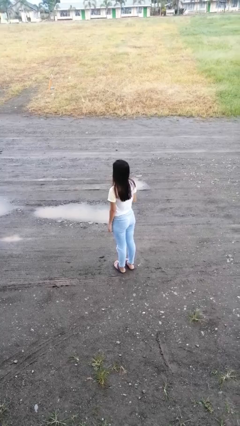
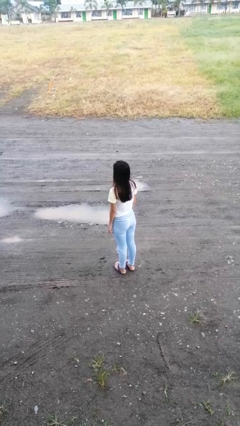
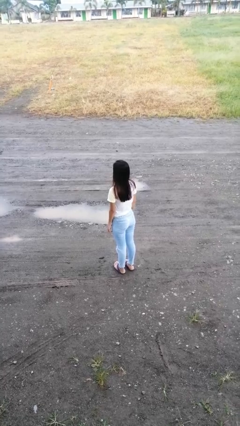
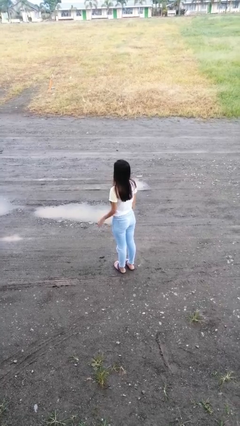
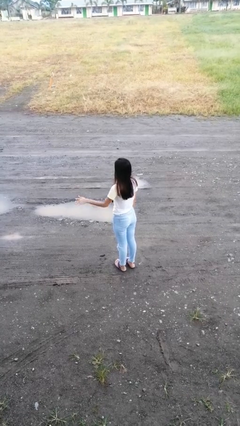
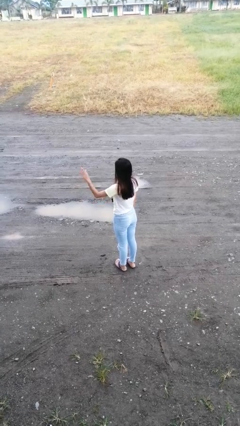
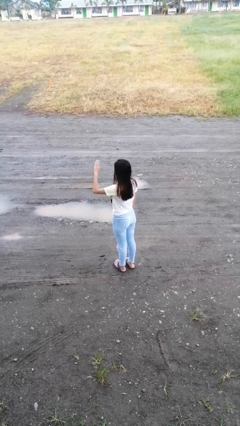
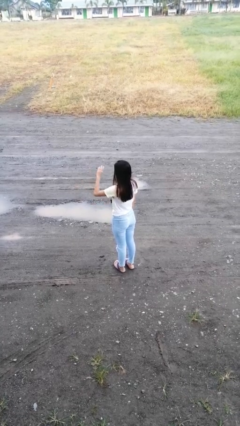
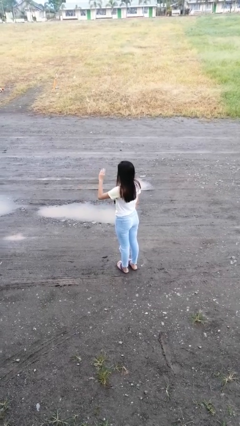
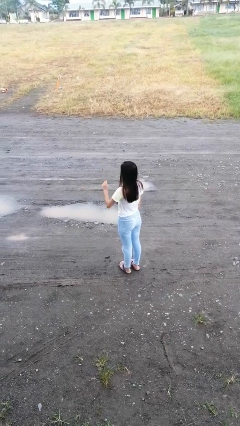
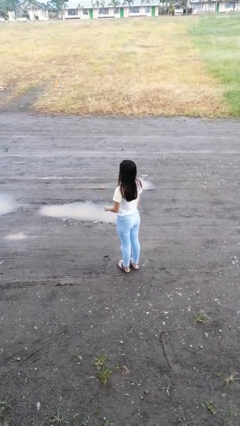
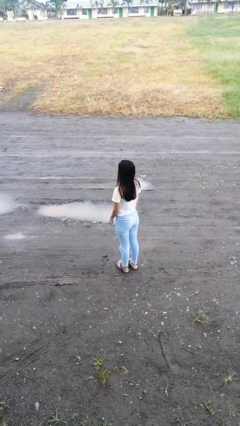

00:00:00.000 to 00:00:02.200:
person gestures swipe right

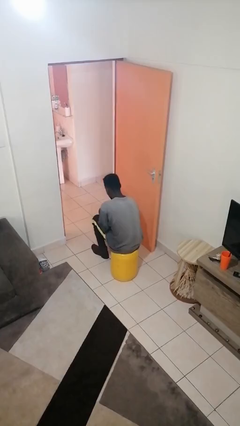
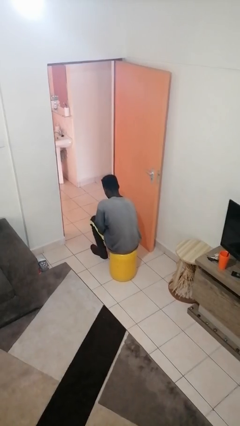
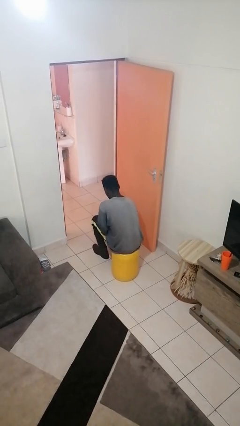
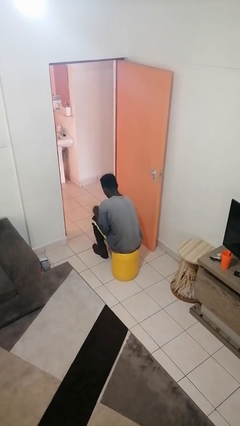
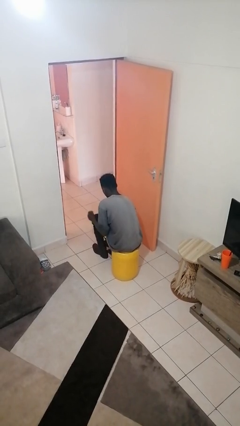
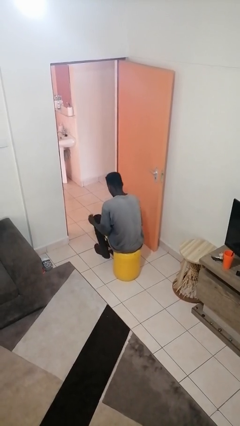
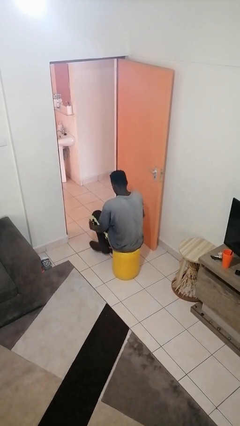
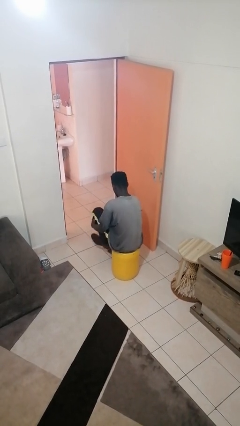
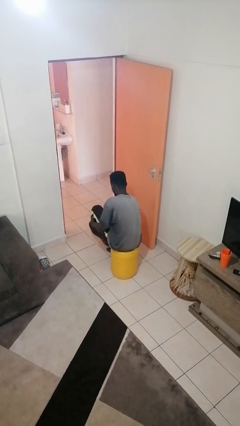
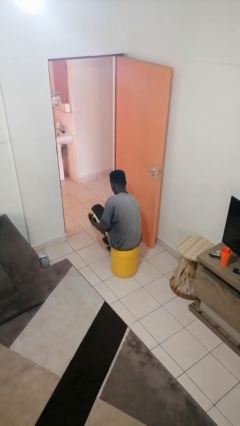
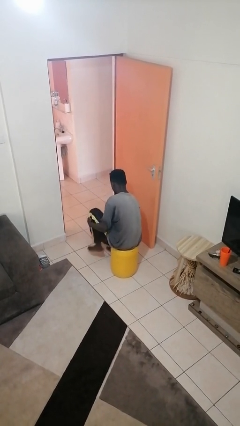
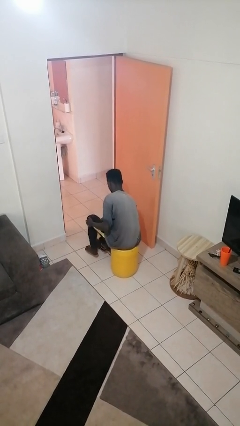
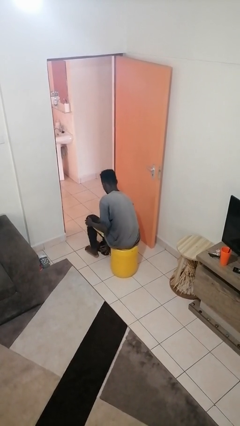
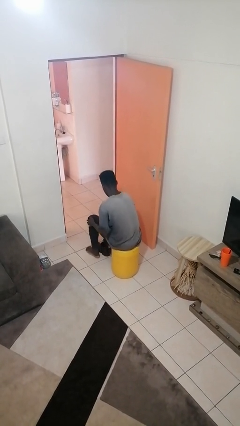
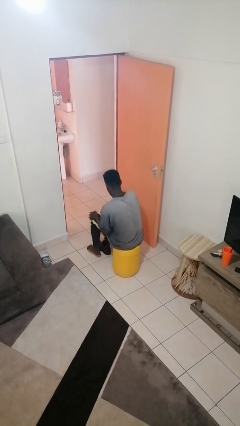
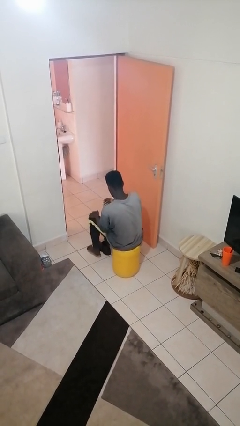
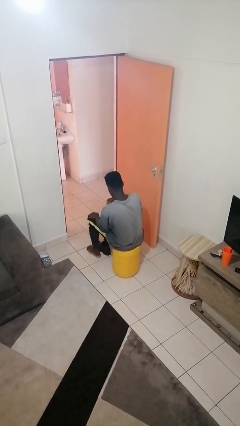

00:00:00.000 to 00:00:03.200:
person takes off shoes

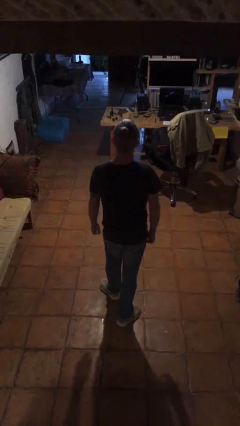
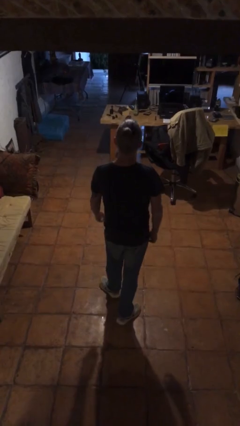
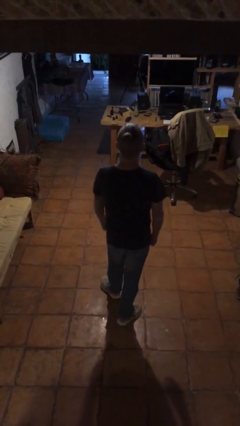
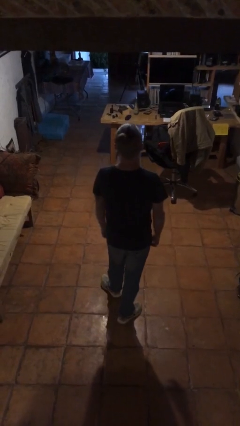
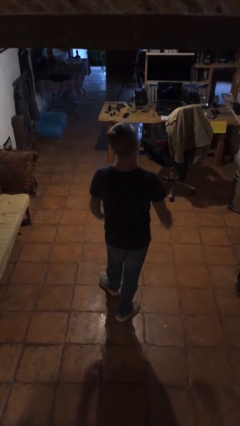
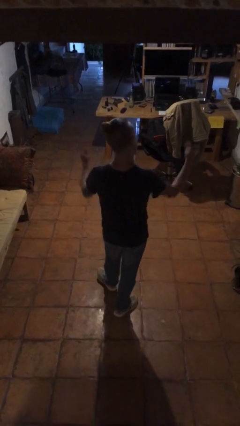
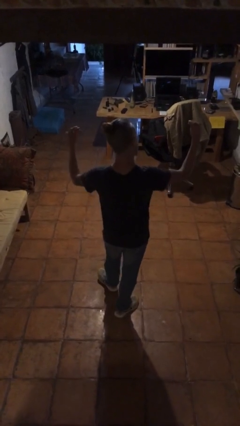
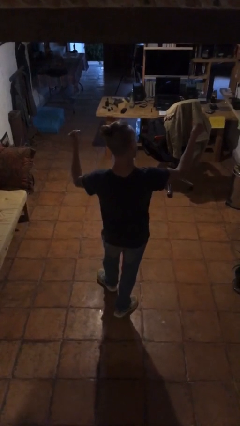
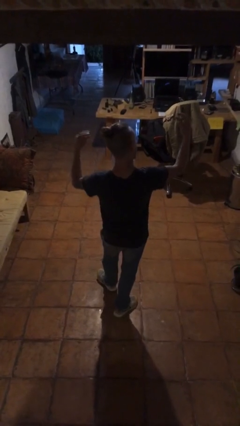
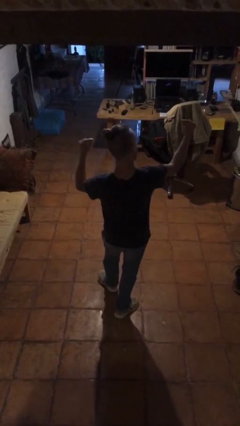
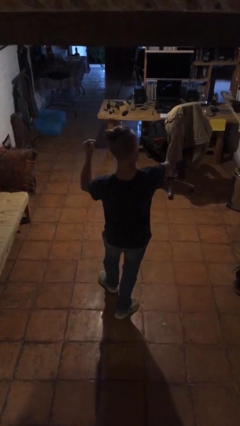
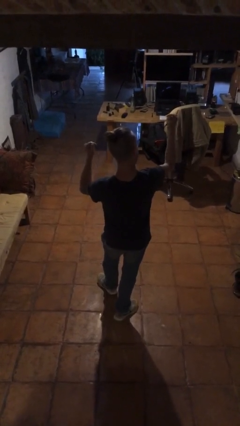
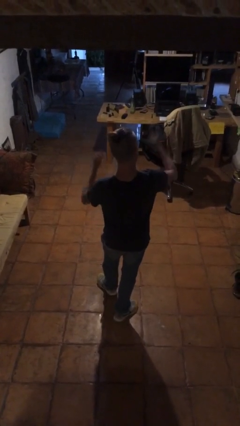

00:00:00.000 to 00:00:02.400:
person snaps fingers

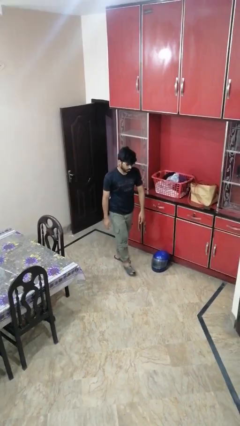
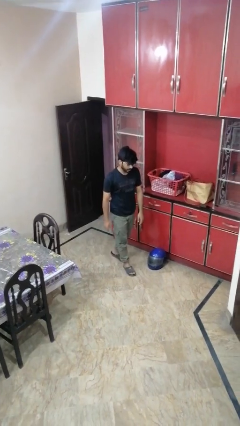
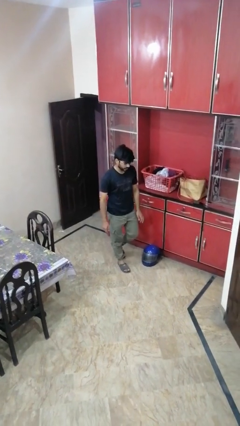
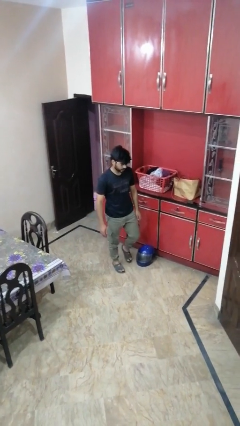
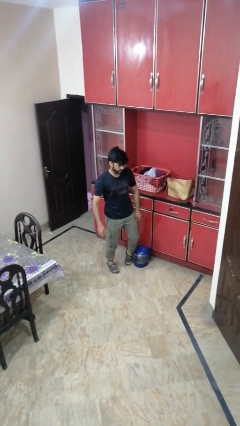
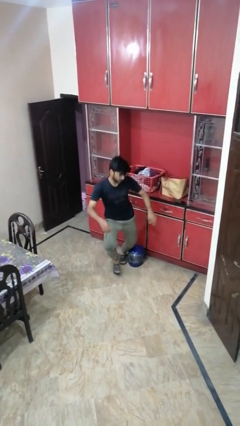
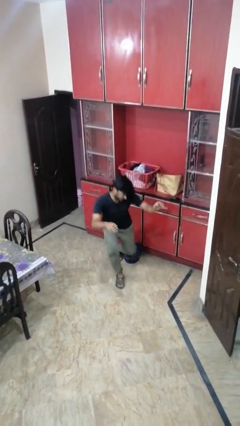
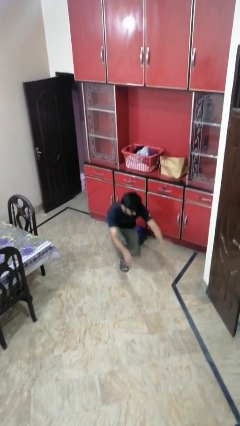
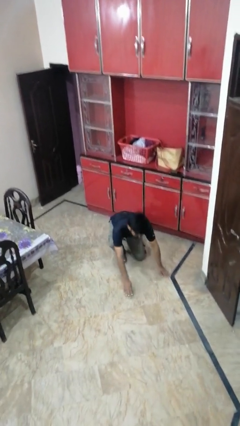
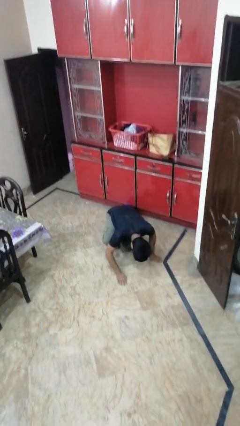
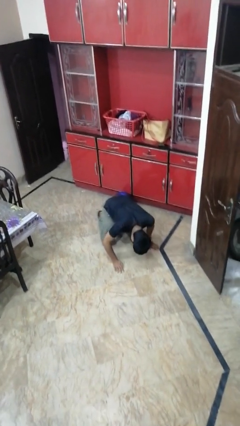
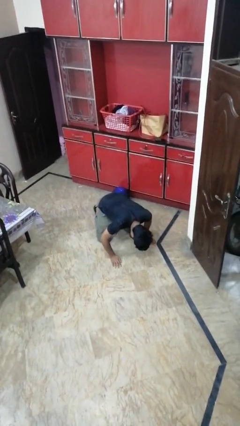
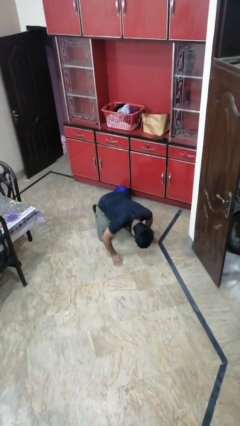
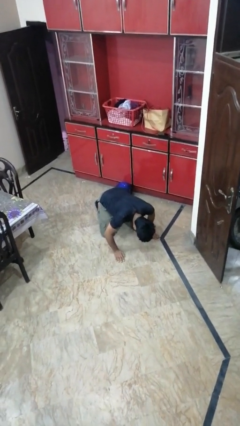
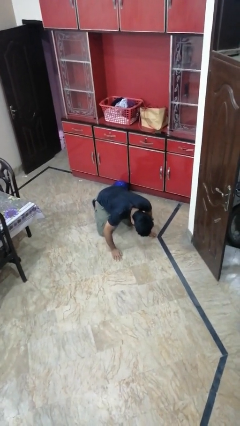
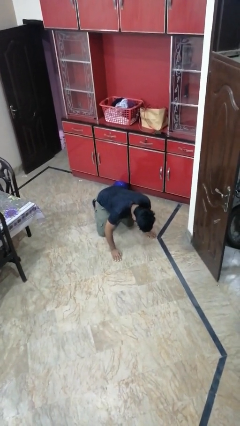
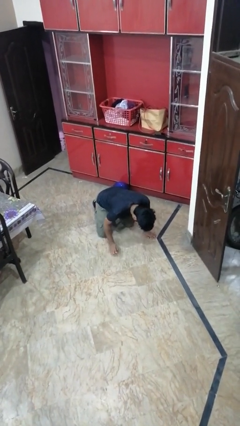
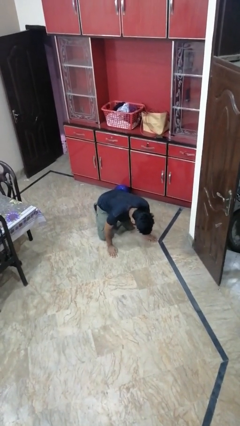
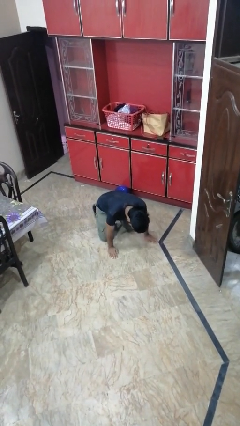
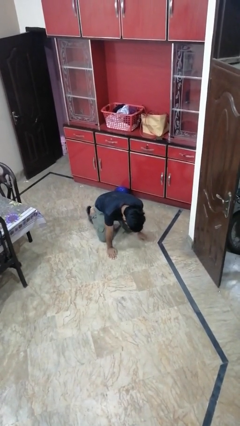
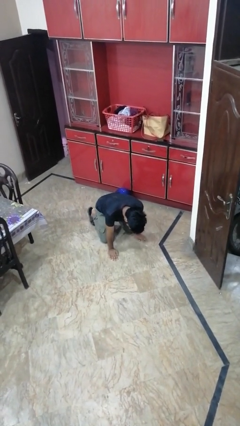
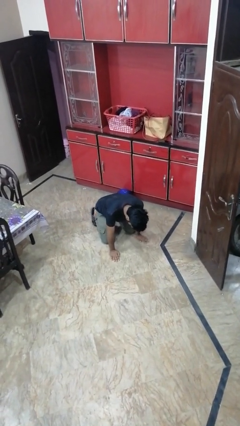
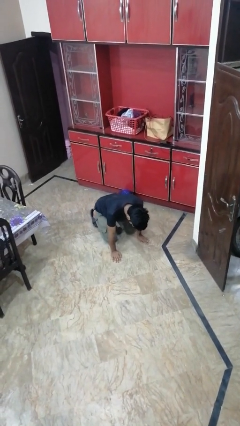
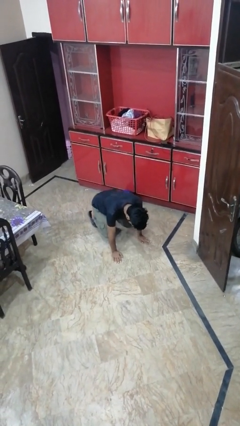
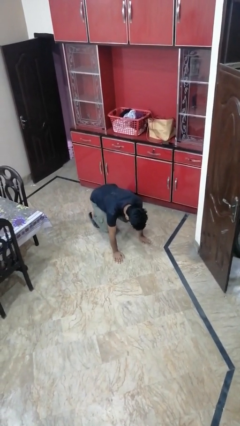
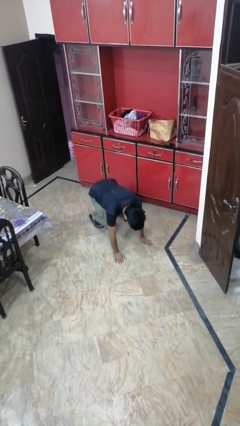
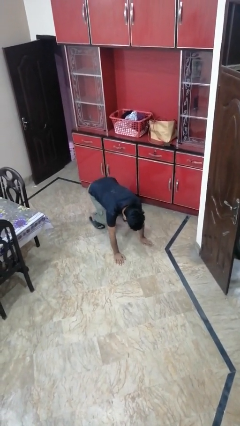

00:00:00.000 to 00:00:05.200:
person trips on object on floor

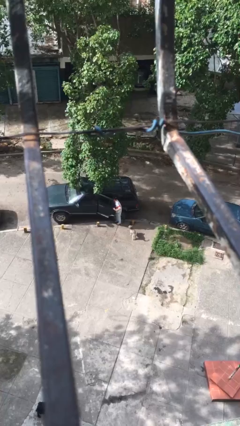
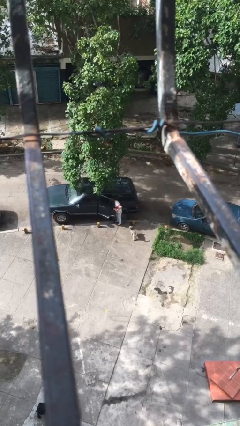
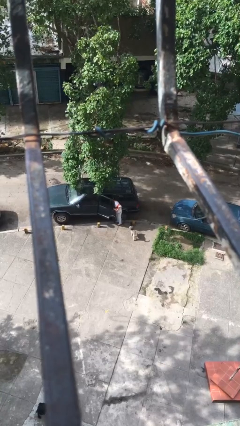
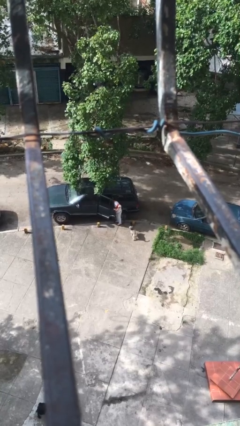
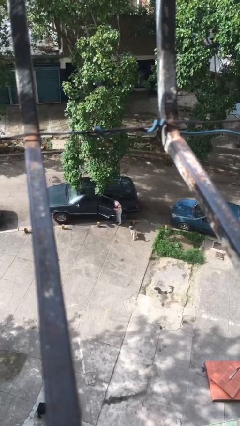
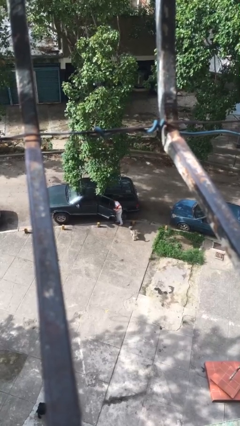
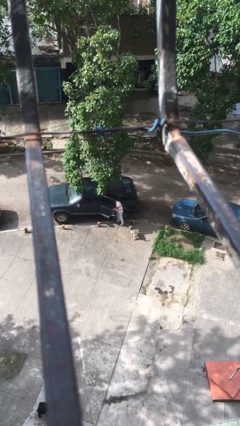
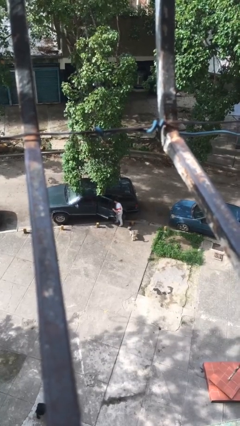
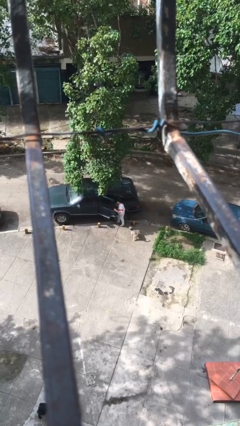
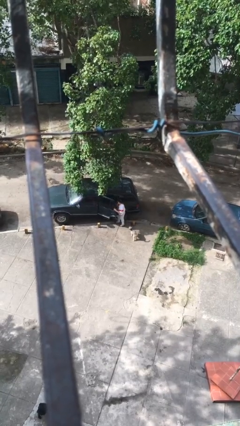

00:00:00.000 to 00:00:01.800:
person unloads car

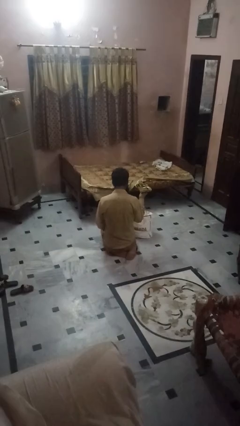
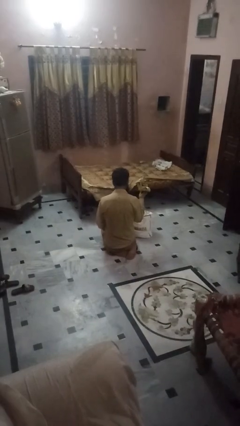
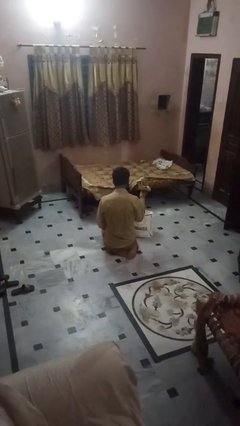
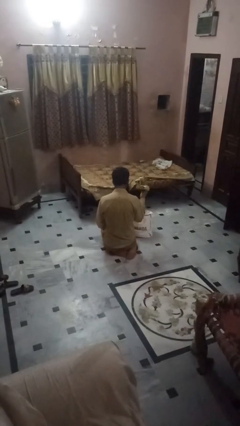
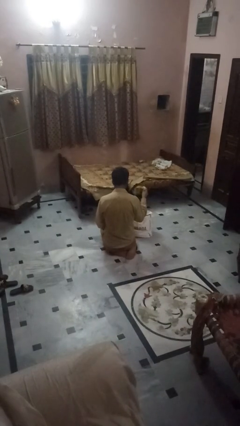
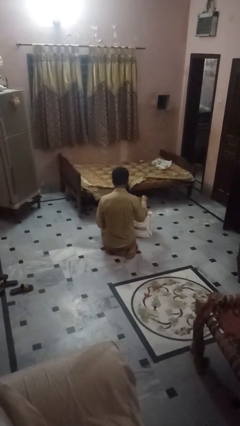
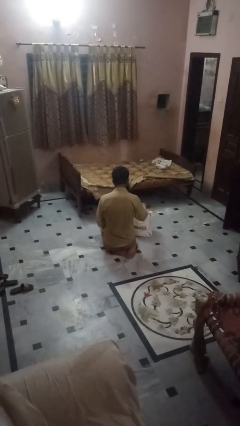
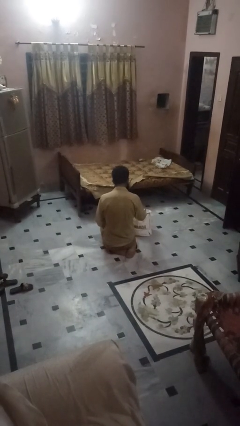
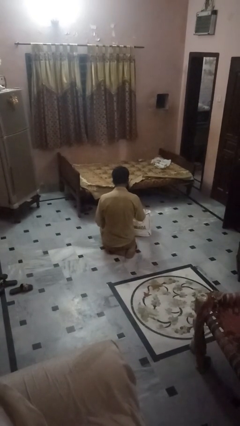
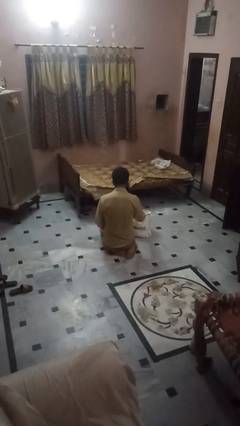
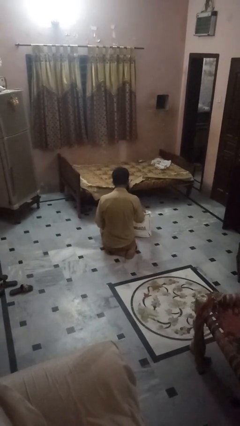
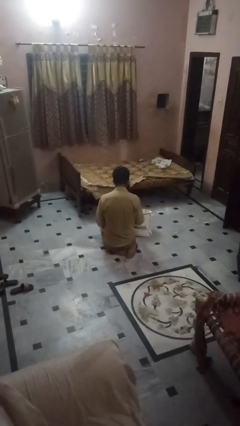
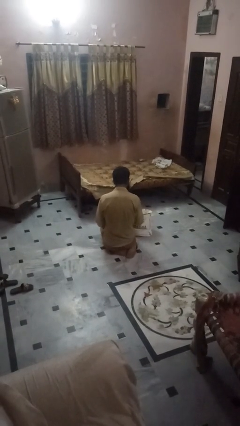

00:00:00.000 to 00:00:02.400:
person puts object into bag

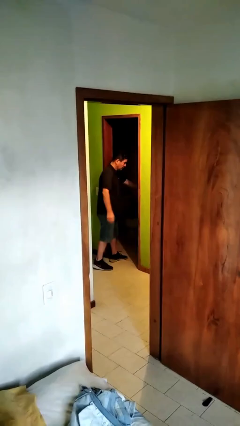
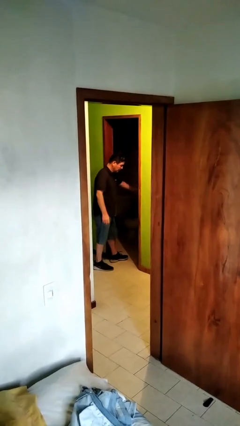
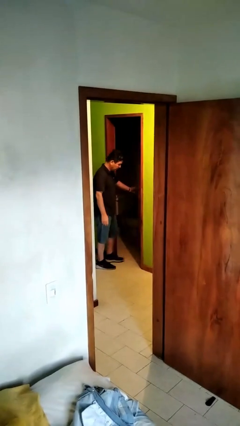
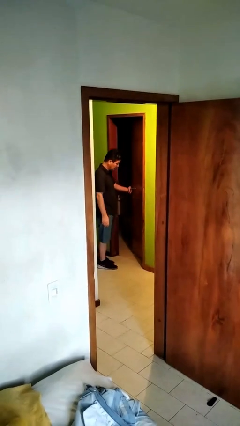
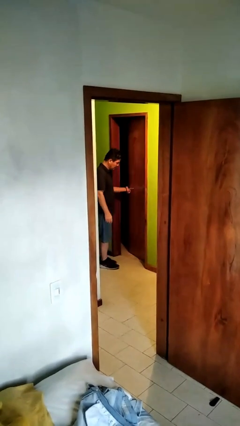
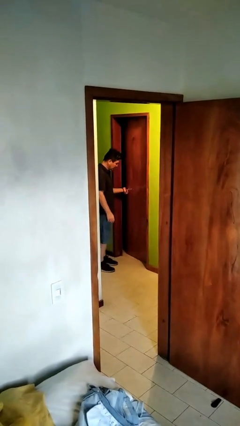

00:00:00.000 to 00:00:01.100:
person closes facility door
